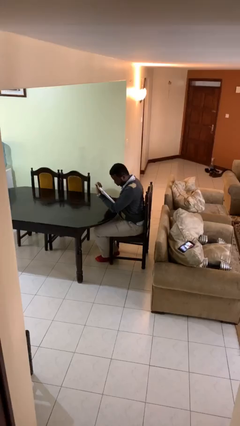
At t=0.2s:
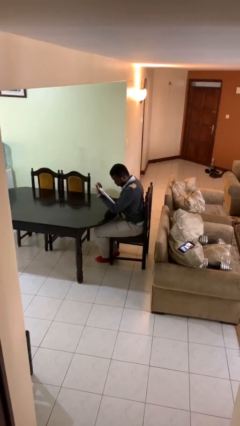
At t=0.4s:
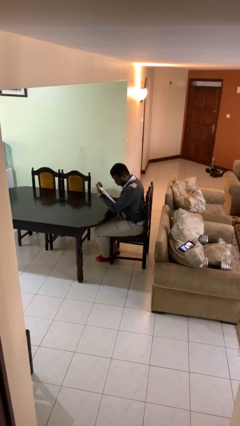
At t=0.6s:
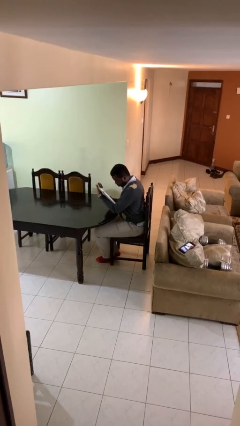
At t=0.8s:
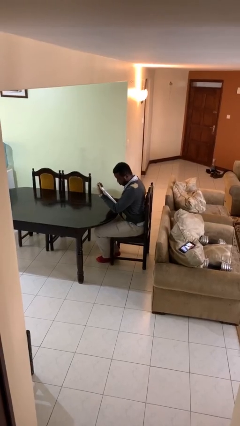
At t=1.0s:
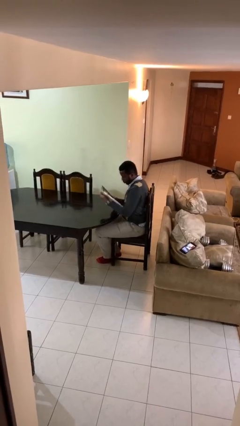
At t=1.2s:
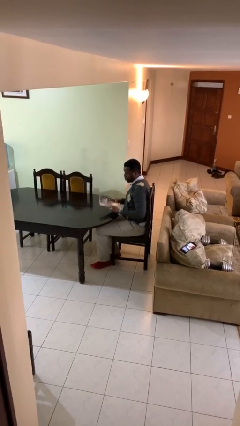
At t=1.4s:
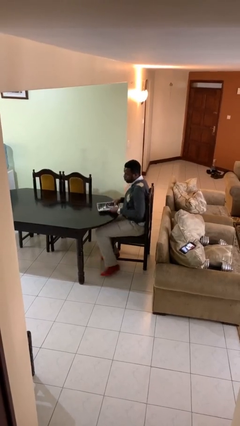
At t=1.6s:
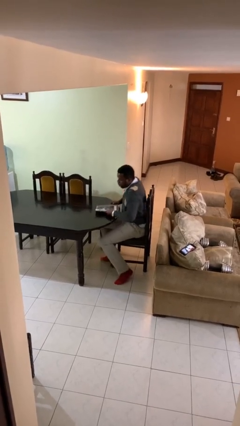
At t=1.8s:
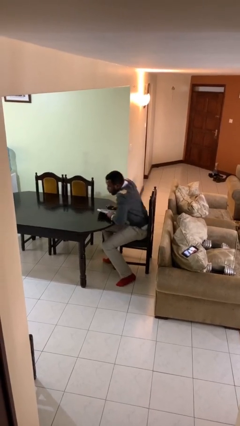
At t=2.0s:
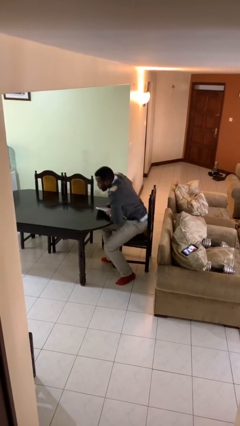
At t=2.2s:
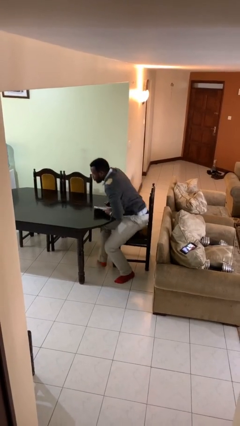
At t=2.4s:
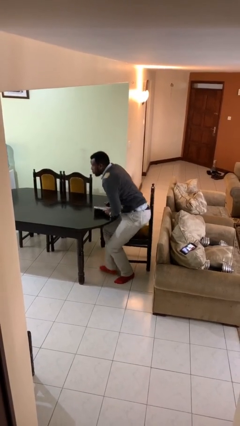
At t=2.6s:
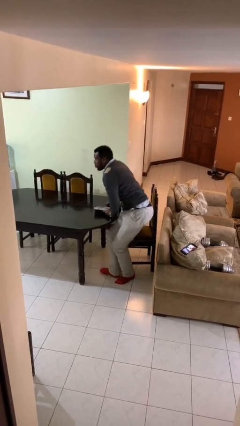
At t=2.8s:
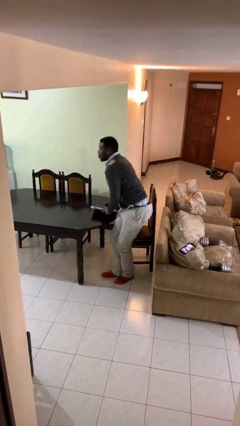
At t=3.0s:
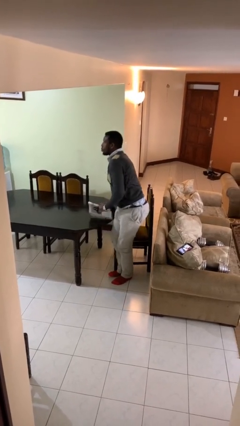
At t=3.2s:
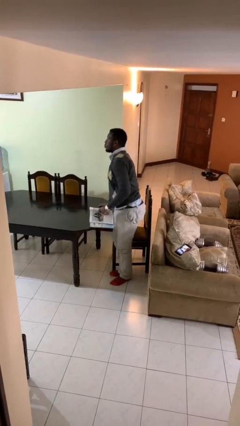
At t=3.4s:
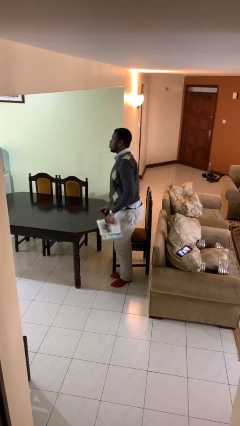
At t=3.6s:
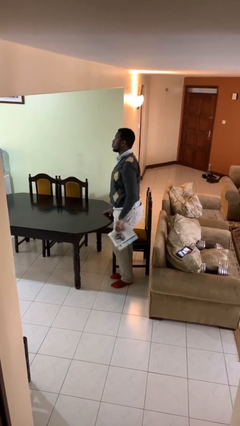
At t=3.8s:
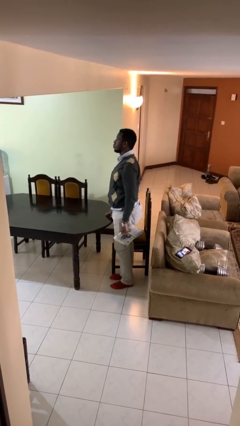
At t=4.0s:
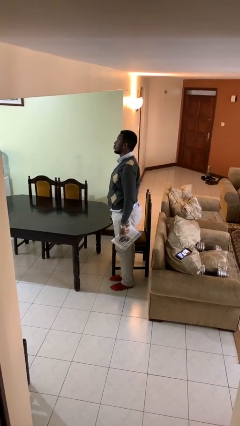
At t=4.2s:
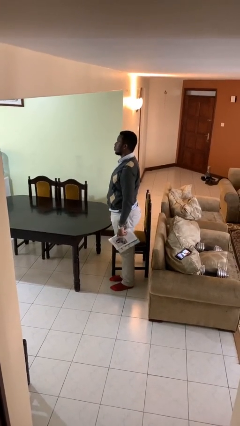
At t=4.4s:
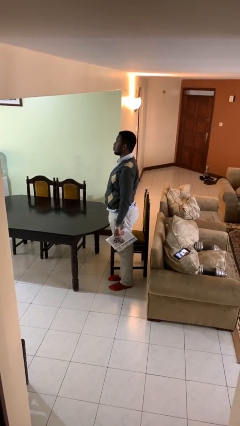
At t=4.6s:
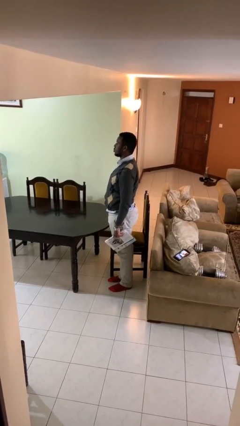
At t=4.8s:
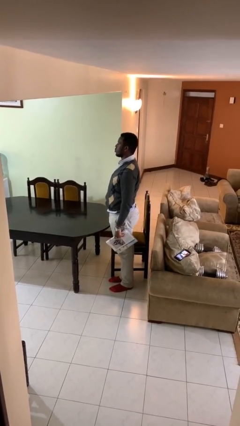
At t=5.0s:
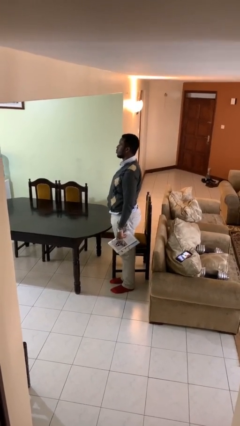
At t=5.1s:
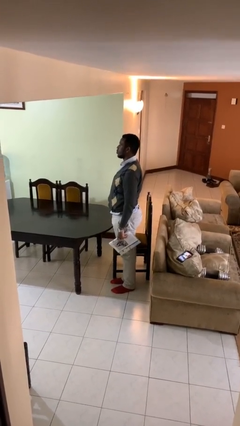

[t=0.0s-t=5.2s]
person stands up

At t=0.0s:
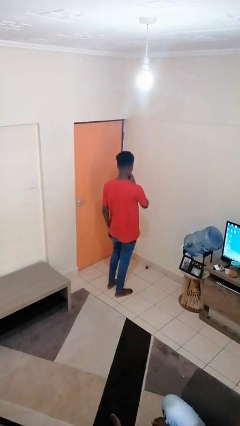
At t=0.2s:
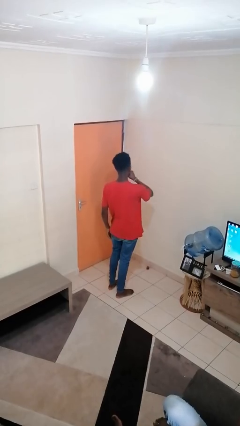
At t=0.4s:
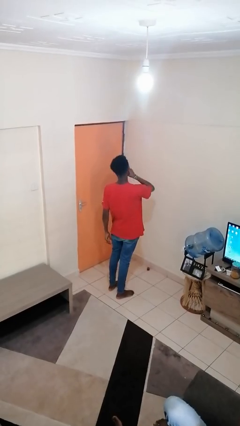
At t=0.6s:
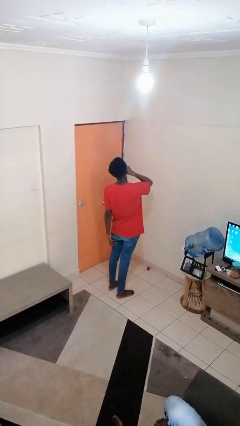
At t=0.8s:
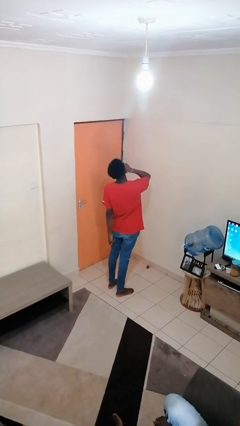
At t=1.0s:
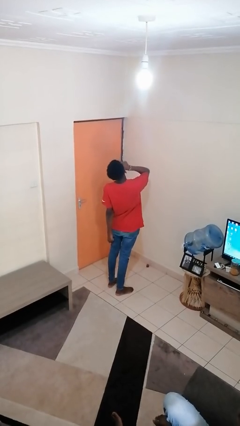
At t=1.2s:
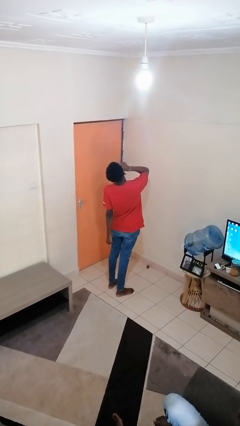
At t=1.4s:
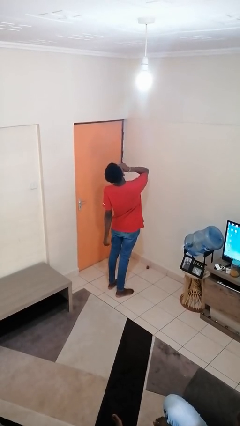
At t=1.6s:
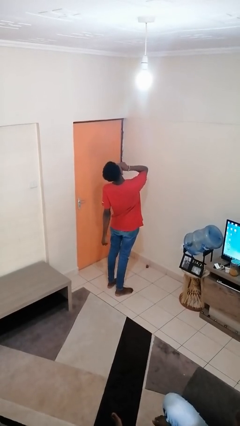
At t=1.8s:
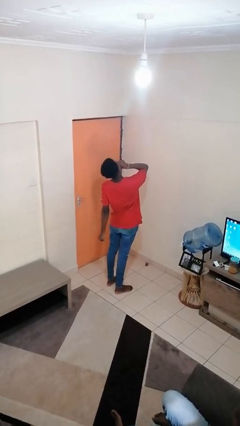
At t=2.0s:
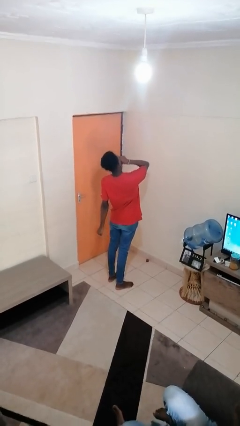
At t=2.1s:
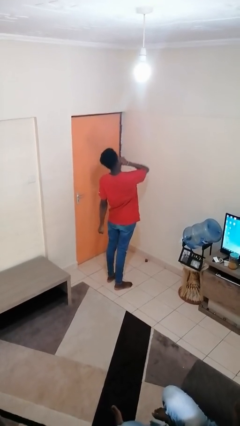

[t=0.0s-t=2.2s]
person yawns

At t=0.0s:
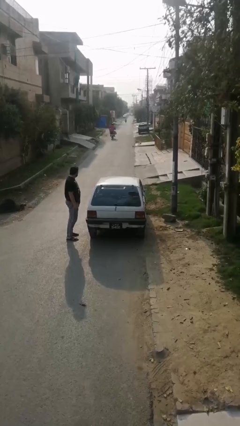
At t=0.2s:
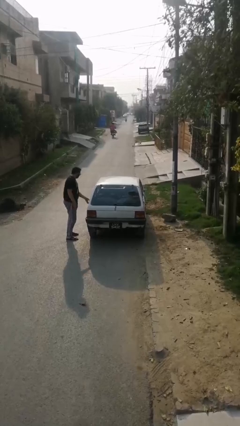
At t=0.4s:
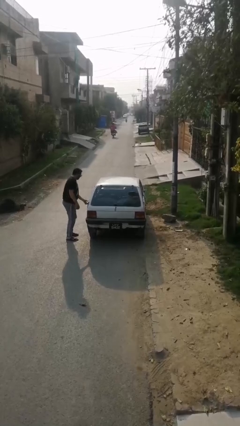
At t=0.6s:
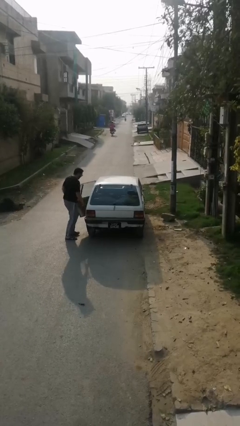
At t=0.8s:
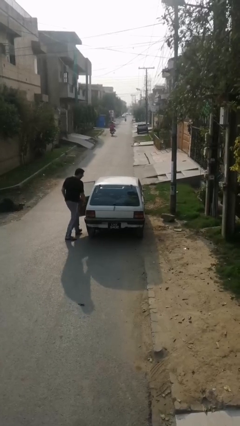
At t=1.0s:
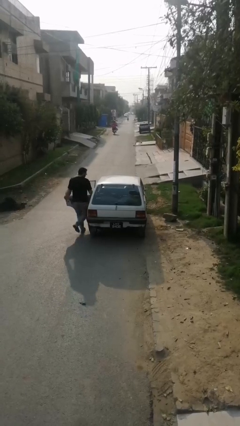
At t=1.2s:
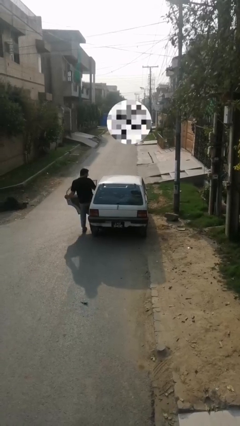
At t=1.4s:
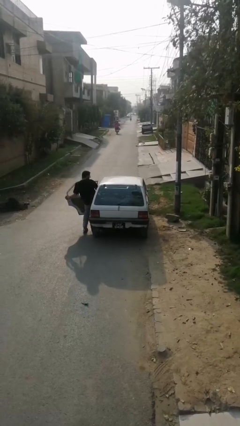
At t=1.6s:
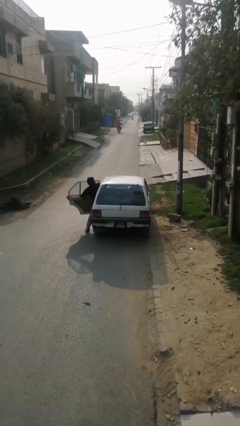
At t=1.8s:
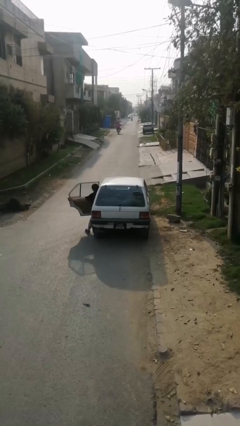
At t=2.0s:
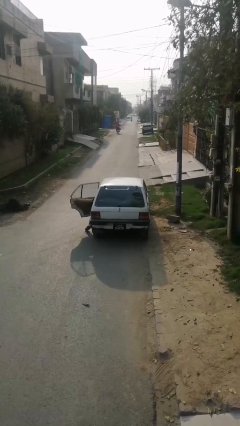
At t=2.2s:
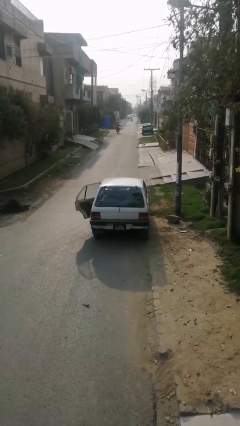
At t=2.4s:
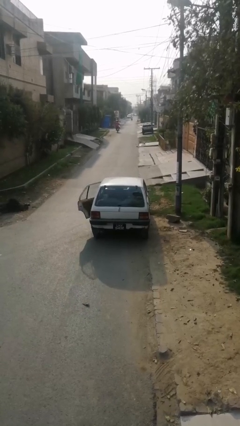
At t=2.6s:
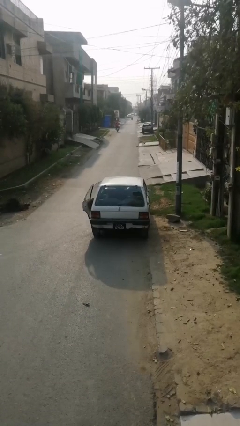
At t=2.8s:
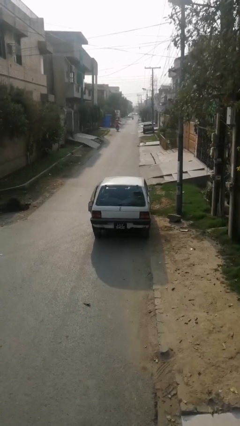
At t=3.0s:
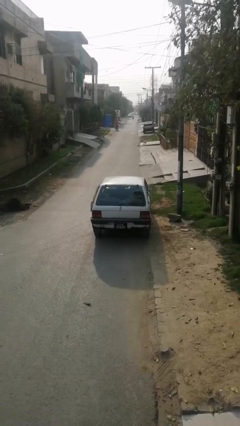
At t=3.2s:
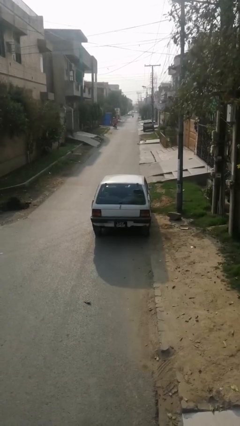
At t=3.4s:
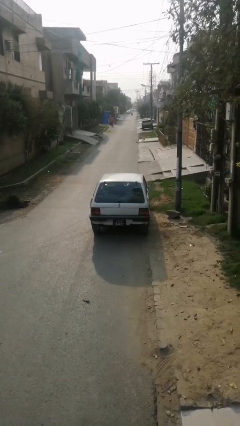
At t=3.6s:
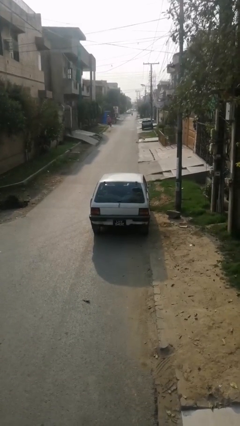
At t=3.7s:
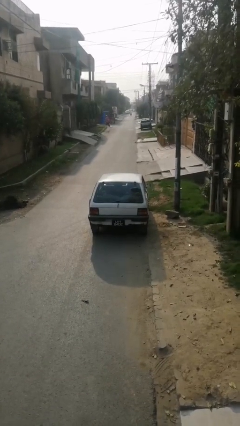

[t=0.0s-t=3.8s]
car picks up person

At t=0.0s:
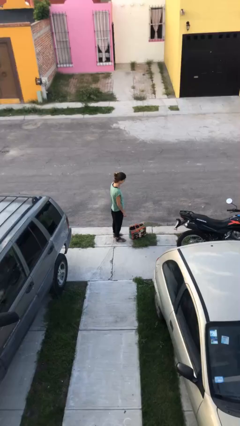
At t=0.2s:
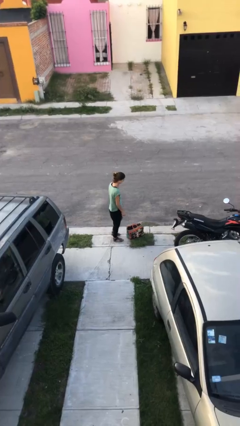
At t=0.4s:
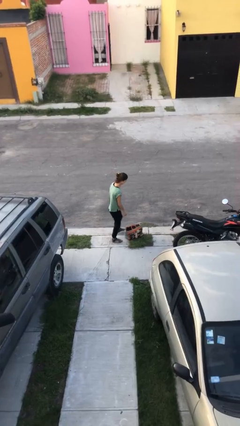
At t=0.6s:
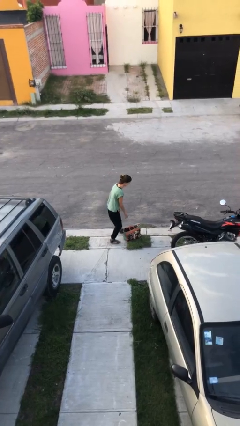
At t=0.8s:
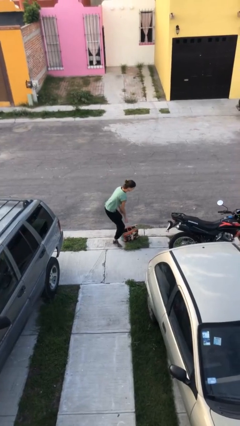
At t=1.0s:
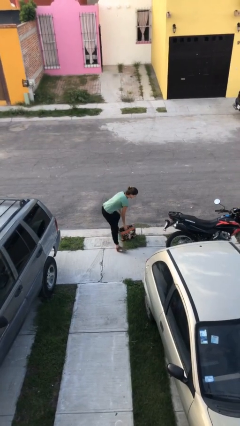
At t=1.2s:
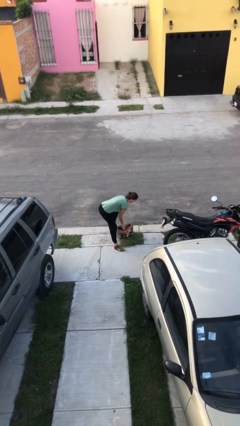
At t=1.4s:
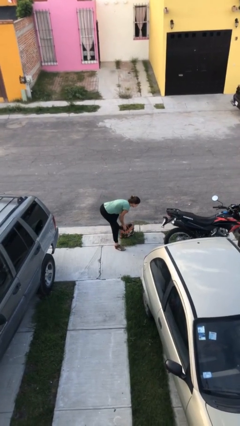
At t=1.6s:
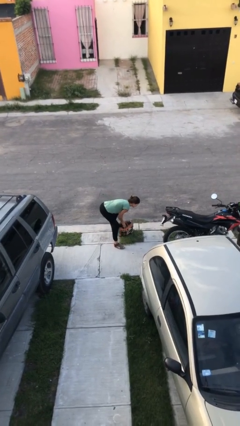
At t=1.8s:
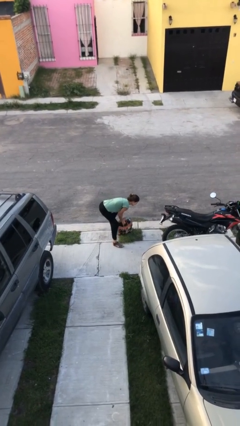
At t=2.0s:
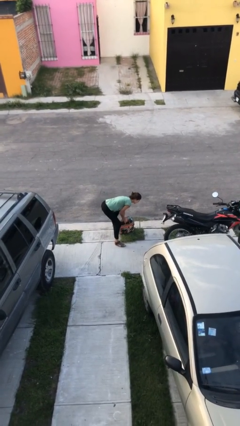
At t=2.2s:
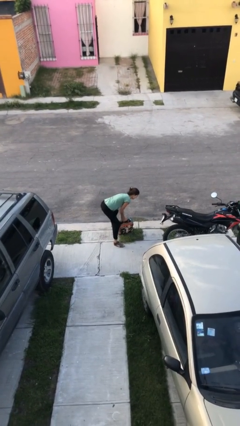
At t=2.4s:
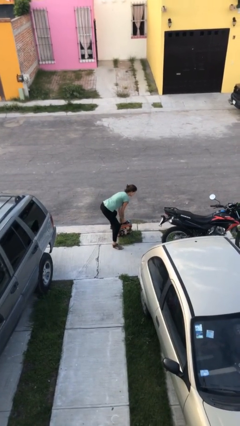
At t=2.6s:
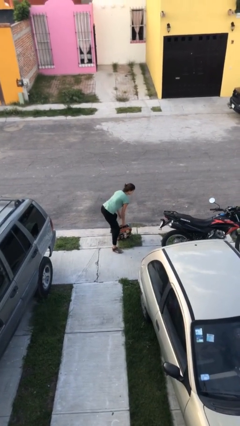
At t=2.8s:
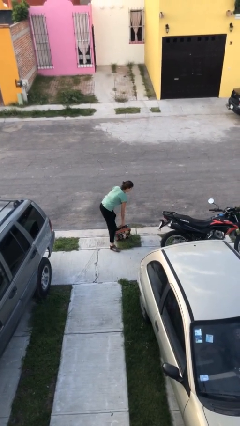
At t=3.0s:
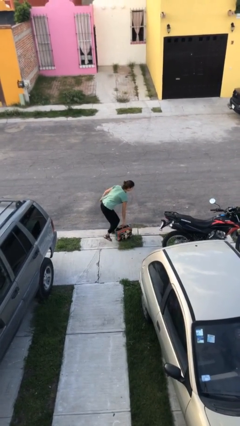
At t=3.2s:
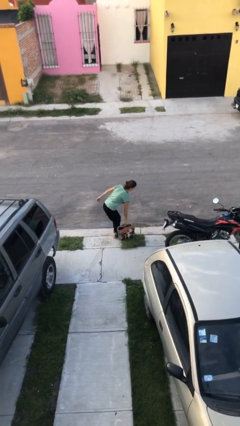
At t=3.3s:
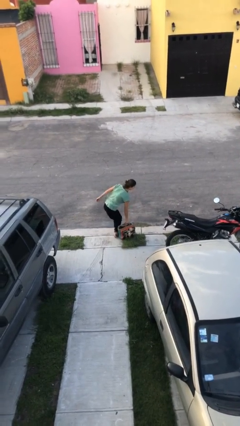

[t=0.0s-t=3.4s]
person picks up object from floor

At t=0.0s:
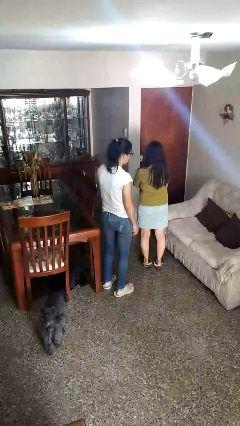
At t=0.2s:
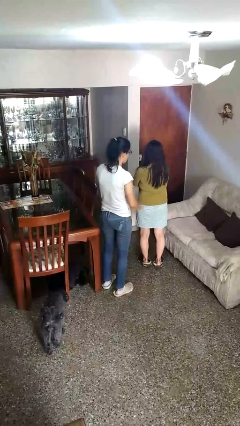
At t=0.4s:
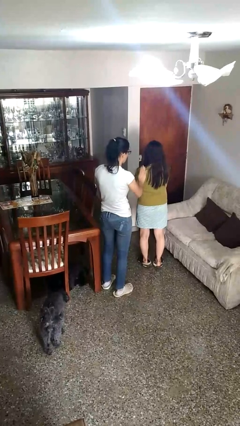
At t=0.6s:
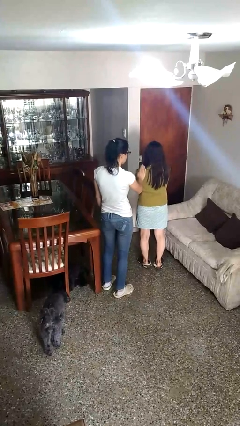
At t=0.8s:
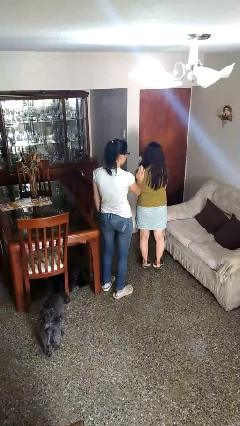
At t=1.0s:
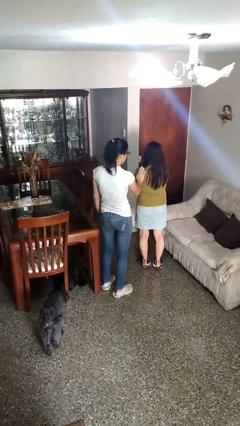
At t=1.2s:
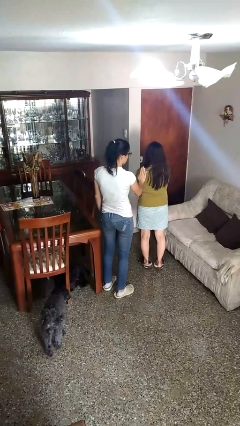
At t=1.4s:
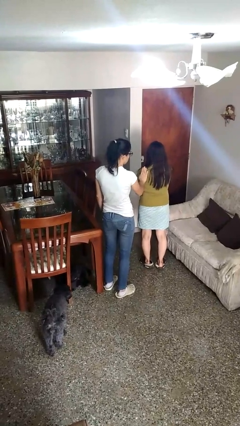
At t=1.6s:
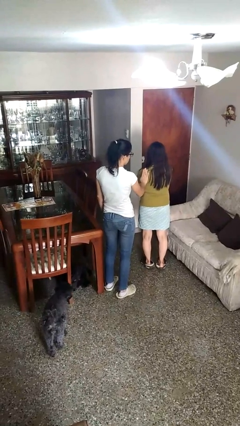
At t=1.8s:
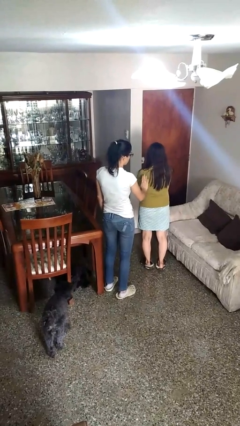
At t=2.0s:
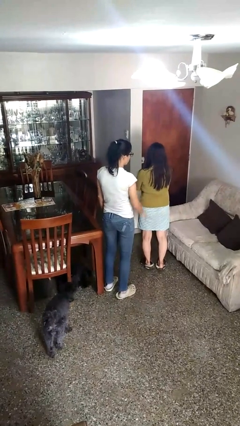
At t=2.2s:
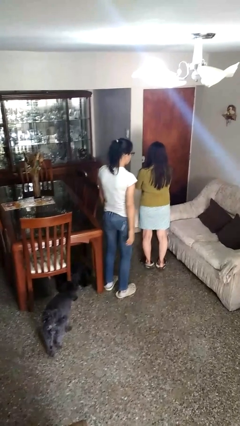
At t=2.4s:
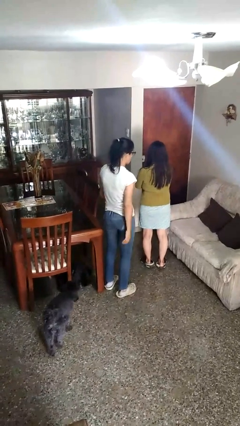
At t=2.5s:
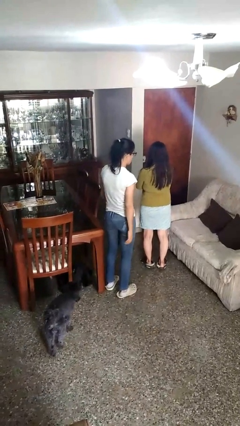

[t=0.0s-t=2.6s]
person touches back of person
